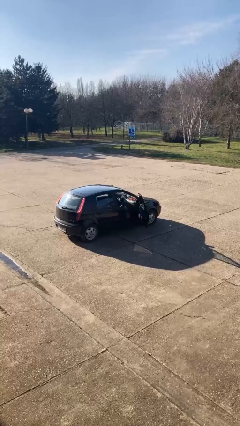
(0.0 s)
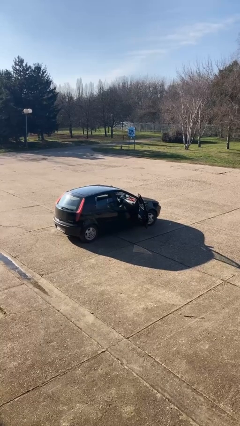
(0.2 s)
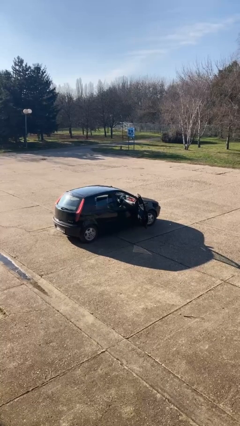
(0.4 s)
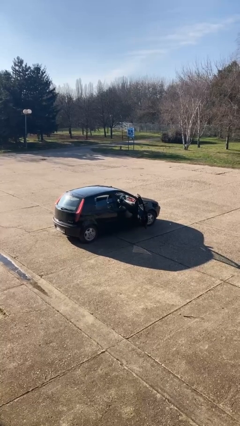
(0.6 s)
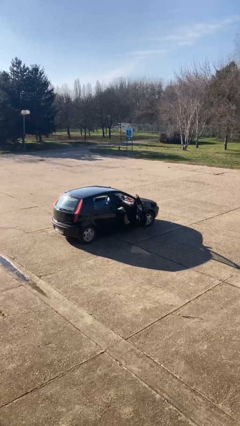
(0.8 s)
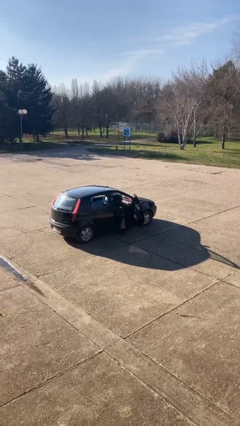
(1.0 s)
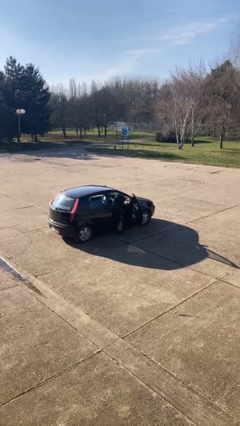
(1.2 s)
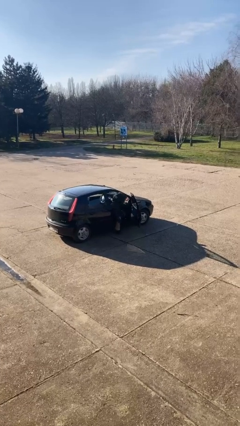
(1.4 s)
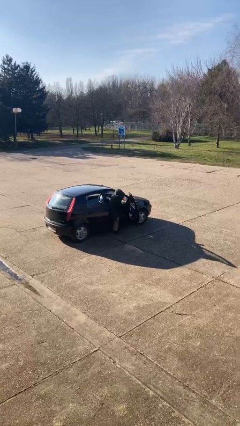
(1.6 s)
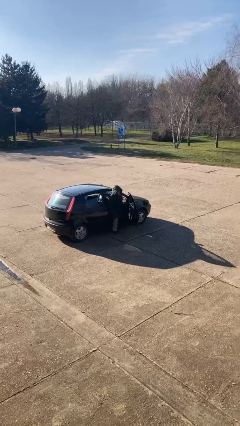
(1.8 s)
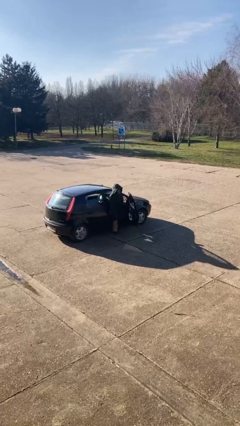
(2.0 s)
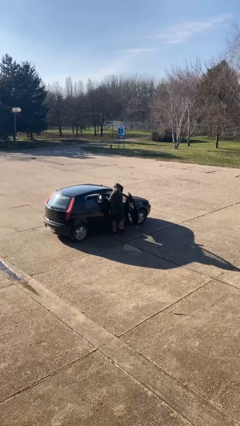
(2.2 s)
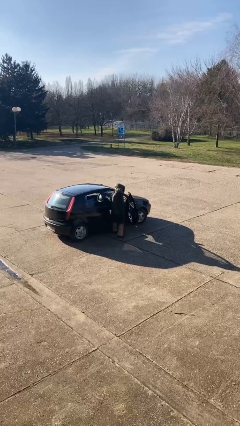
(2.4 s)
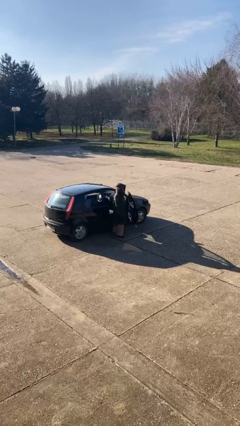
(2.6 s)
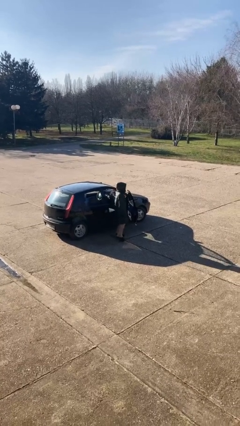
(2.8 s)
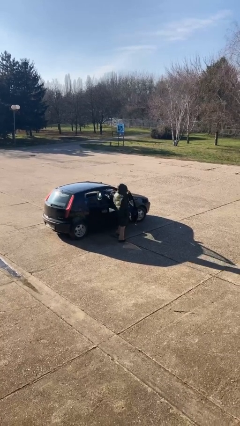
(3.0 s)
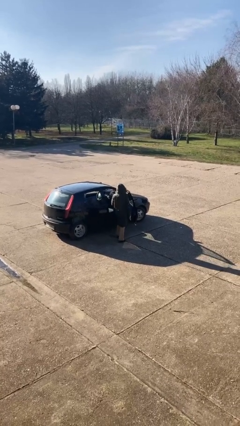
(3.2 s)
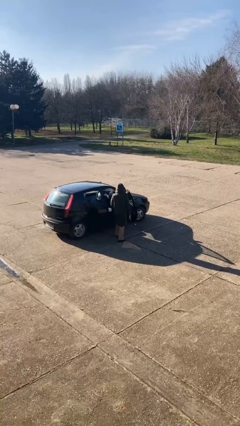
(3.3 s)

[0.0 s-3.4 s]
person exits car

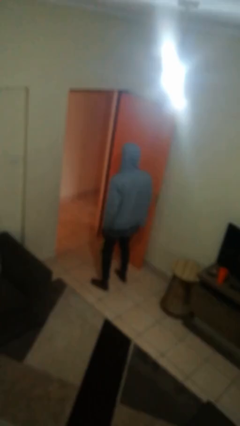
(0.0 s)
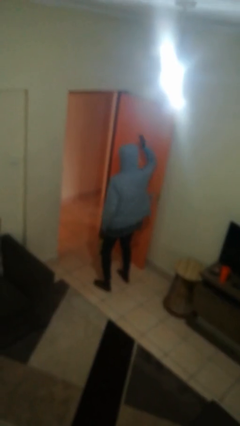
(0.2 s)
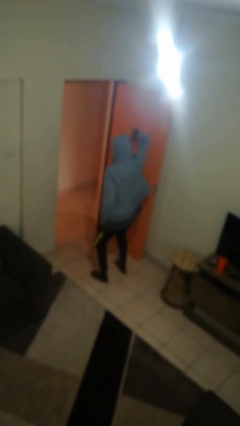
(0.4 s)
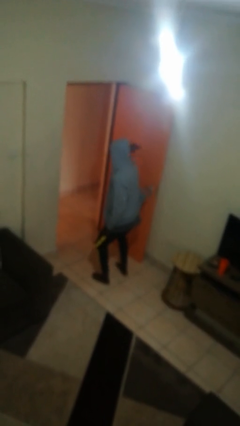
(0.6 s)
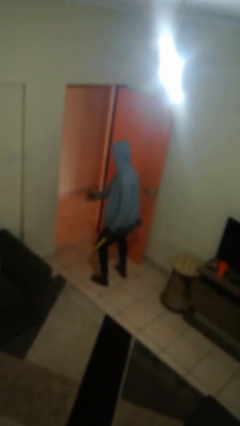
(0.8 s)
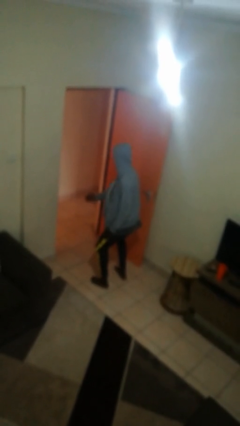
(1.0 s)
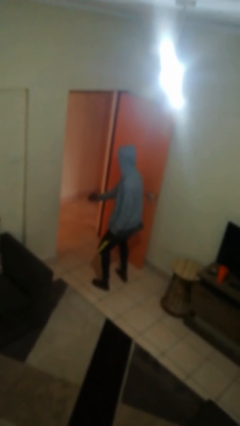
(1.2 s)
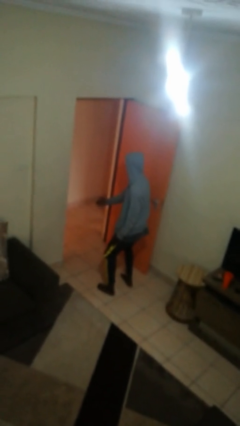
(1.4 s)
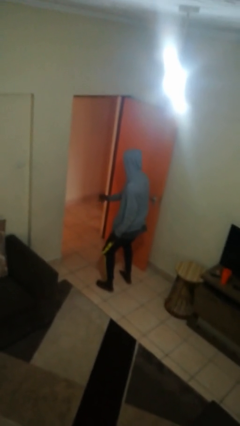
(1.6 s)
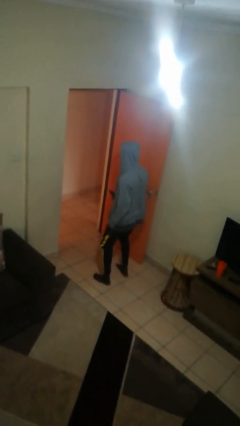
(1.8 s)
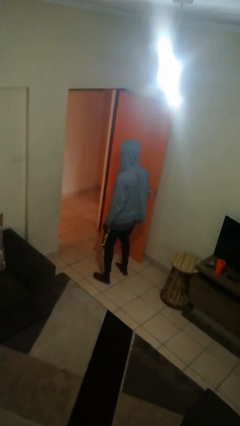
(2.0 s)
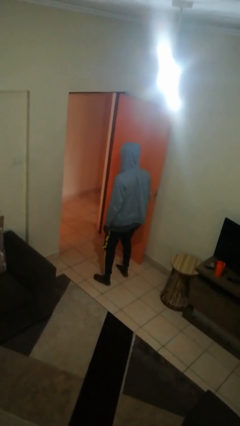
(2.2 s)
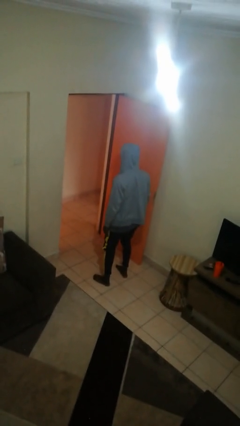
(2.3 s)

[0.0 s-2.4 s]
person karate chop

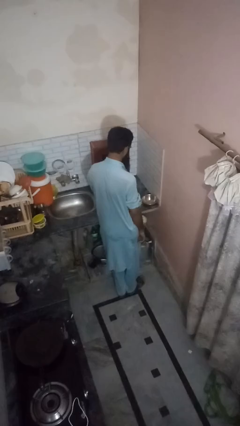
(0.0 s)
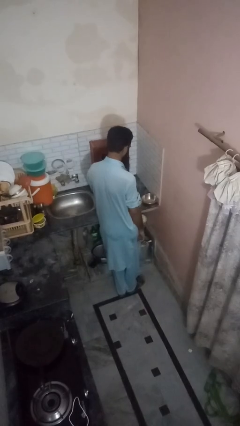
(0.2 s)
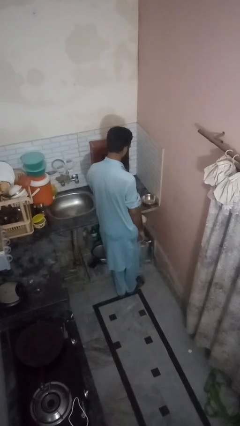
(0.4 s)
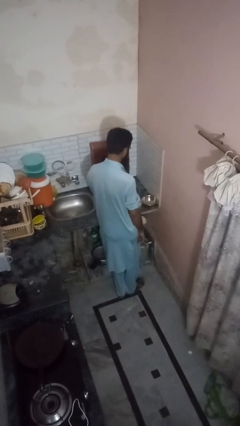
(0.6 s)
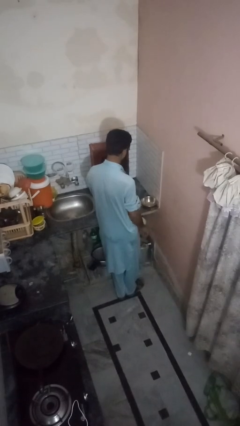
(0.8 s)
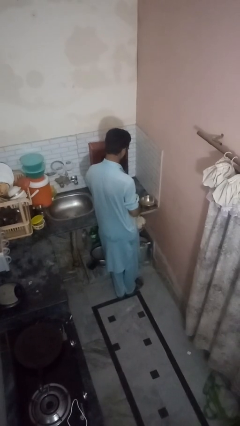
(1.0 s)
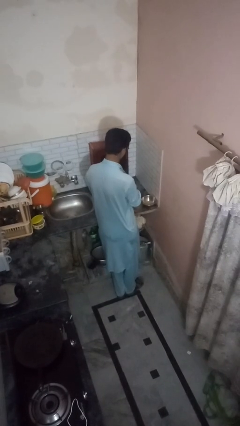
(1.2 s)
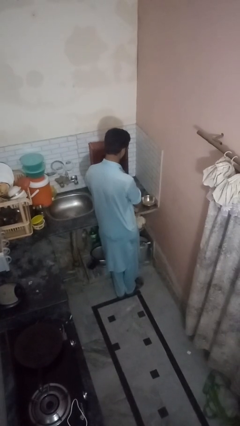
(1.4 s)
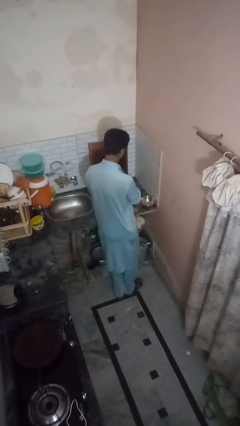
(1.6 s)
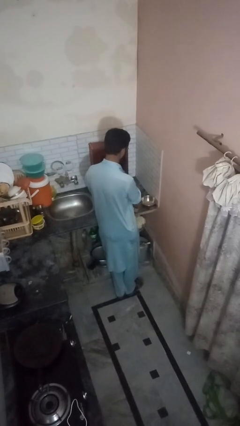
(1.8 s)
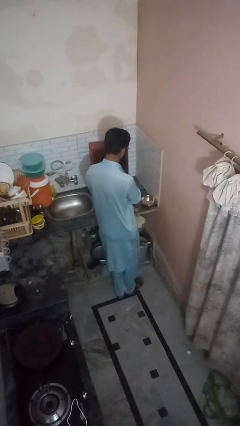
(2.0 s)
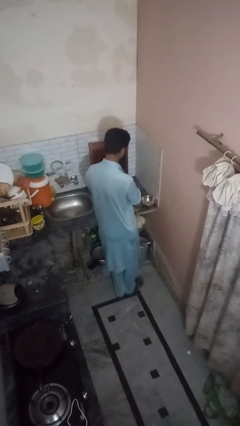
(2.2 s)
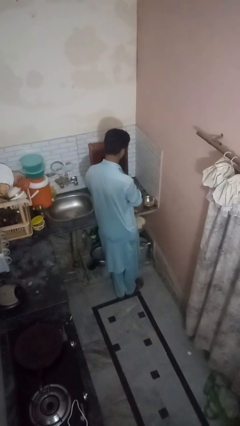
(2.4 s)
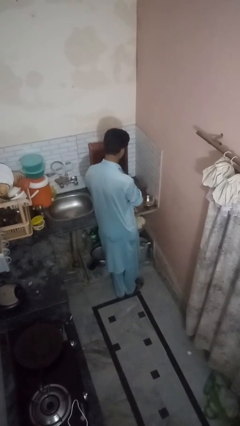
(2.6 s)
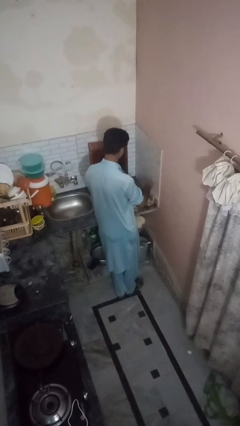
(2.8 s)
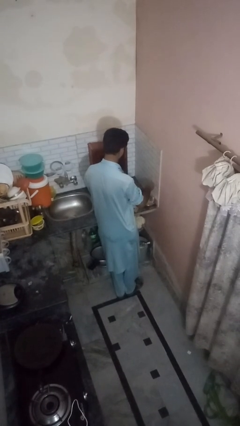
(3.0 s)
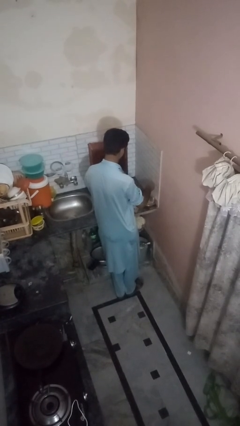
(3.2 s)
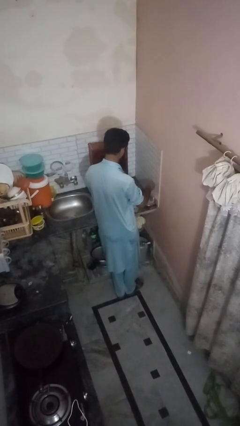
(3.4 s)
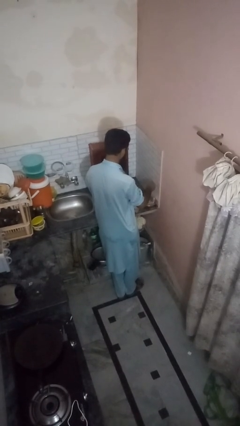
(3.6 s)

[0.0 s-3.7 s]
person pours into bowl

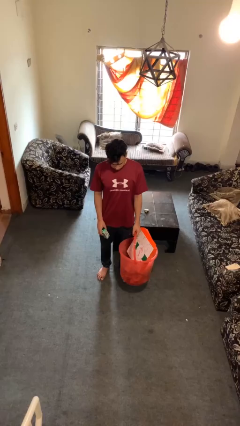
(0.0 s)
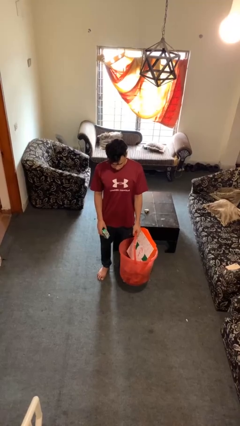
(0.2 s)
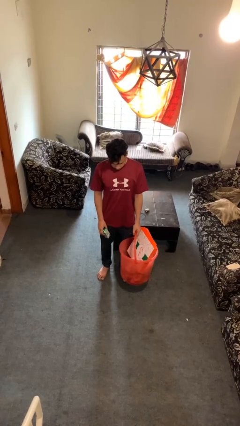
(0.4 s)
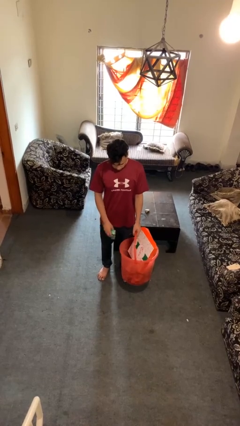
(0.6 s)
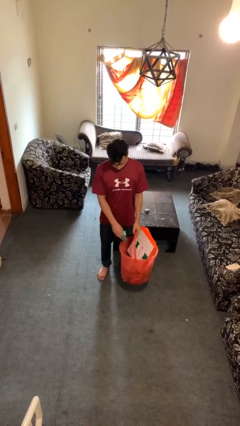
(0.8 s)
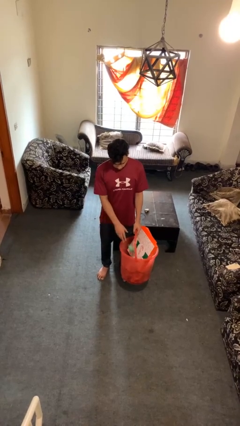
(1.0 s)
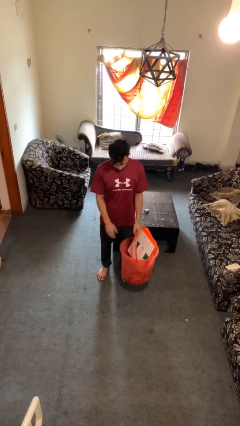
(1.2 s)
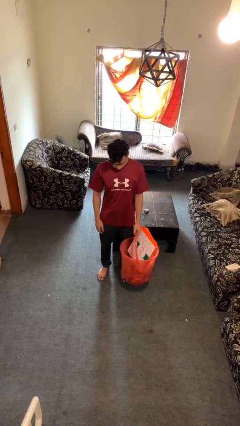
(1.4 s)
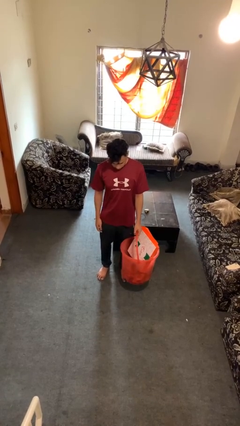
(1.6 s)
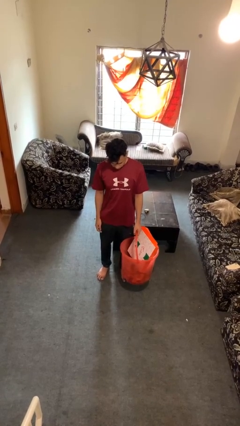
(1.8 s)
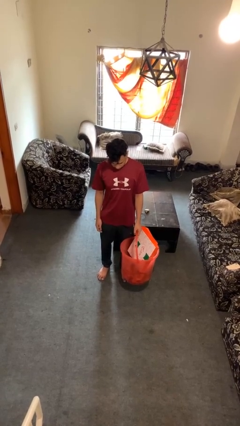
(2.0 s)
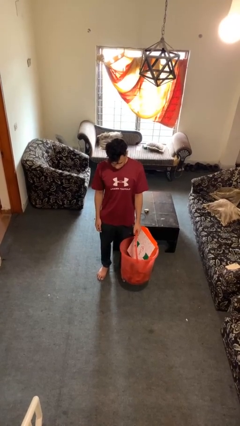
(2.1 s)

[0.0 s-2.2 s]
person puts object into basket

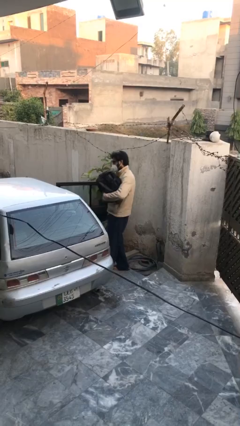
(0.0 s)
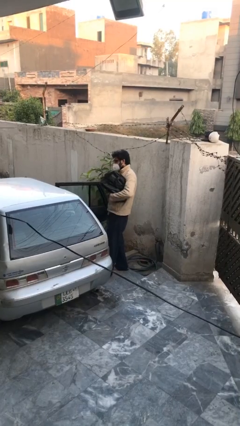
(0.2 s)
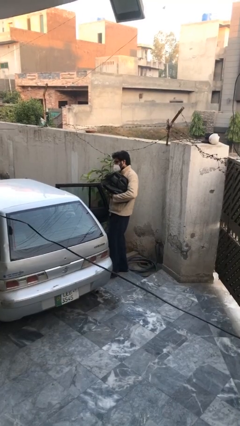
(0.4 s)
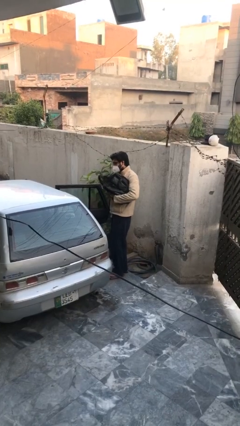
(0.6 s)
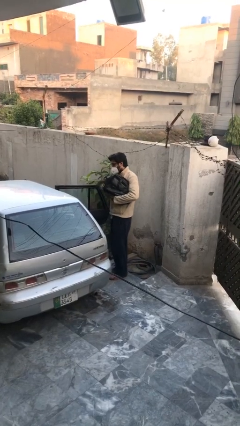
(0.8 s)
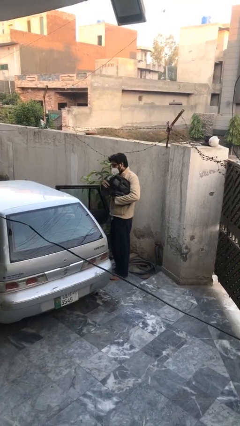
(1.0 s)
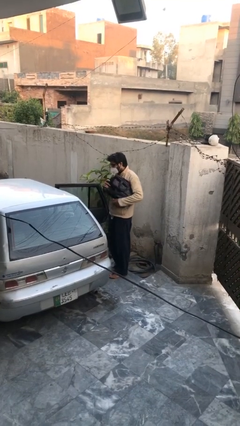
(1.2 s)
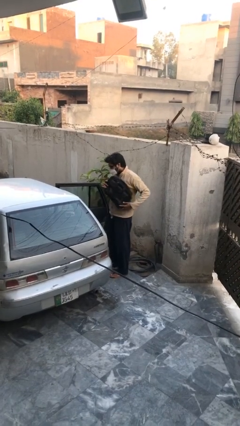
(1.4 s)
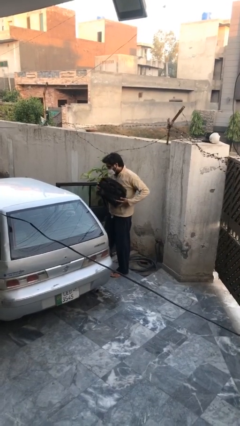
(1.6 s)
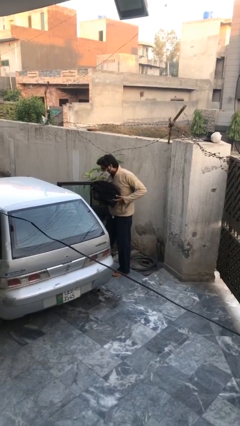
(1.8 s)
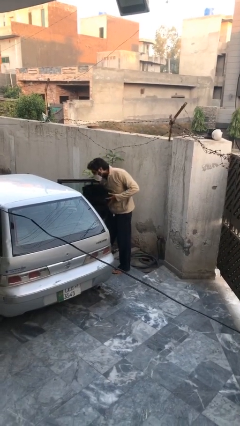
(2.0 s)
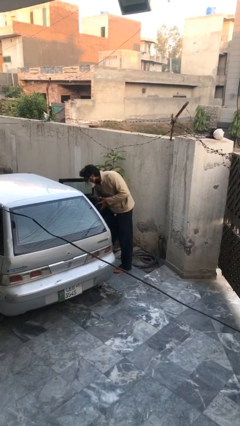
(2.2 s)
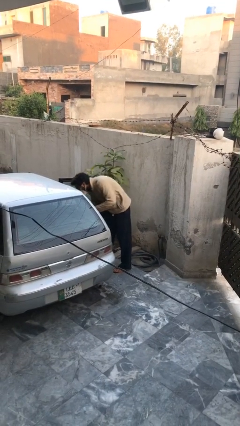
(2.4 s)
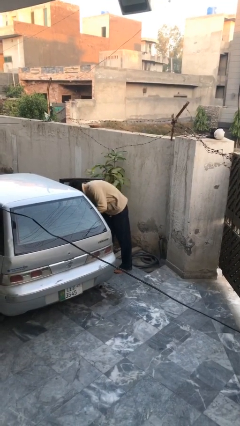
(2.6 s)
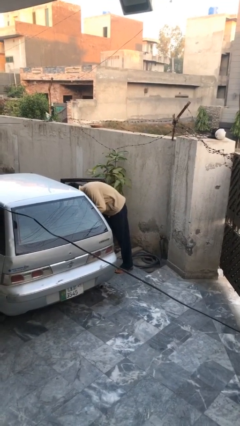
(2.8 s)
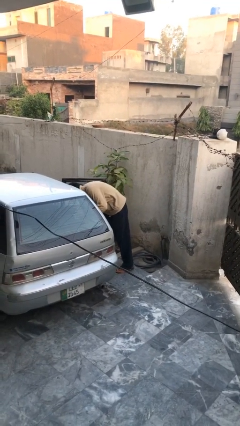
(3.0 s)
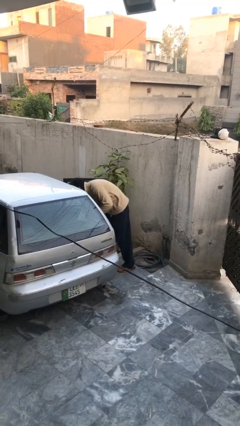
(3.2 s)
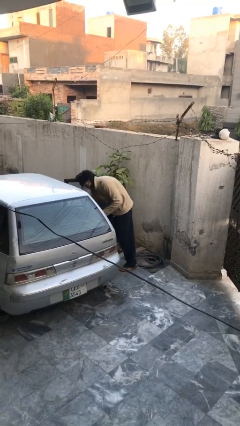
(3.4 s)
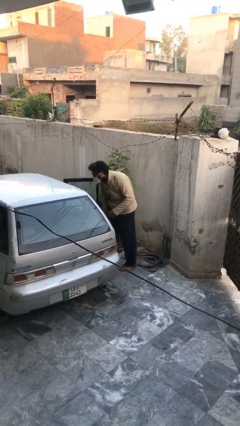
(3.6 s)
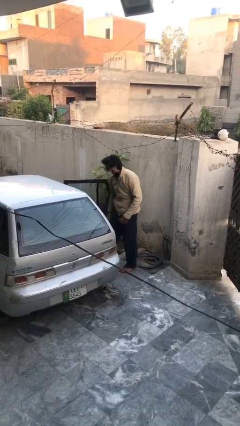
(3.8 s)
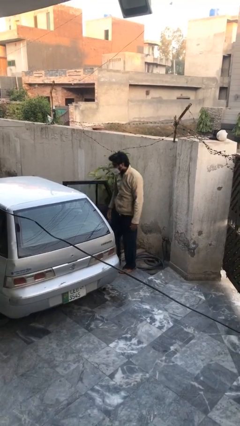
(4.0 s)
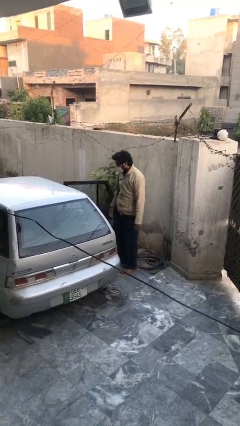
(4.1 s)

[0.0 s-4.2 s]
person loads car

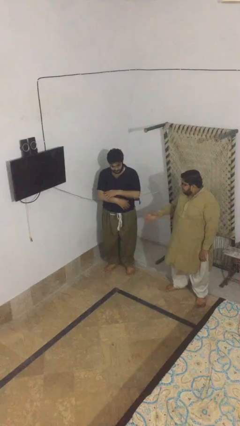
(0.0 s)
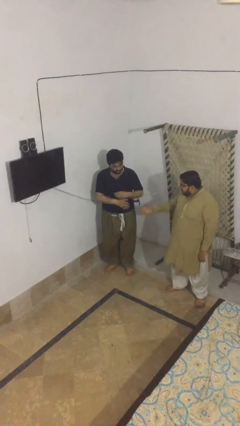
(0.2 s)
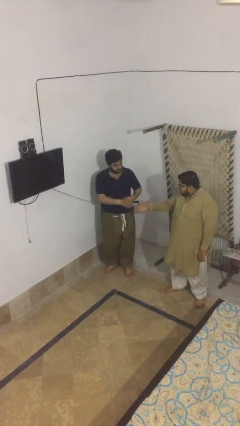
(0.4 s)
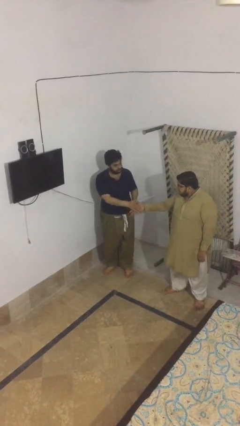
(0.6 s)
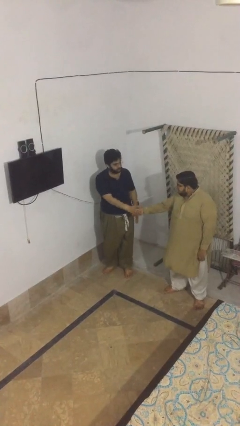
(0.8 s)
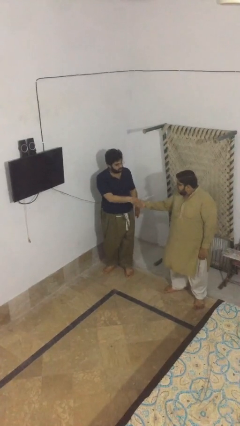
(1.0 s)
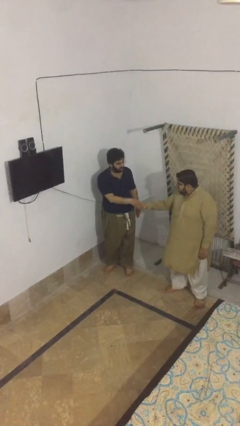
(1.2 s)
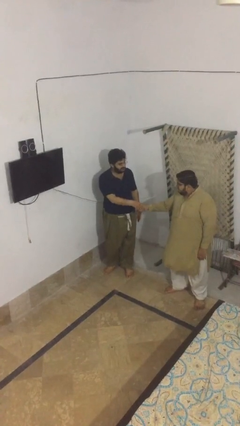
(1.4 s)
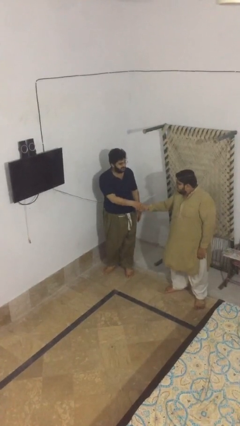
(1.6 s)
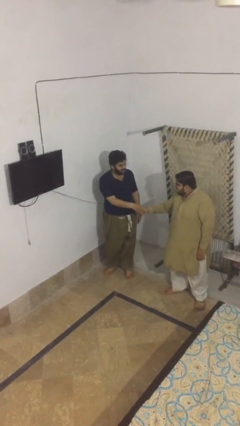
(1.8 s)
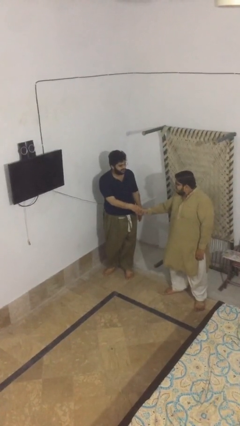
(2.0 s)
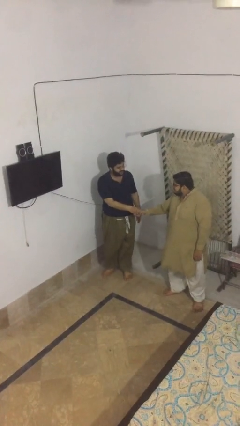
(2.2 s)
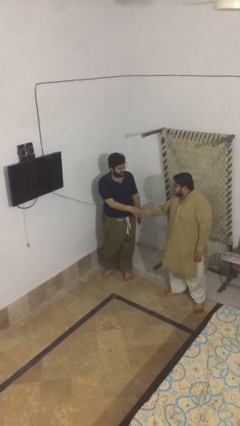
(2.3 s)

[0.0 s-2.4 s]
person shakes hand
